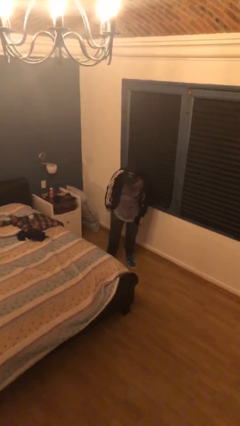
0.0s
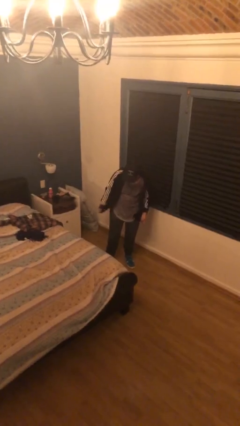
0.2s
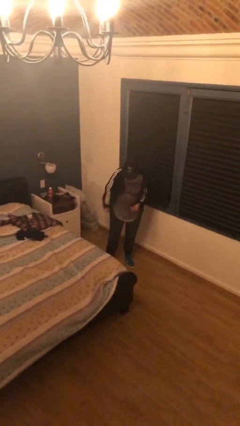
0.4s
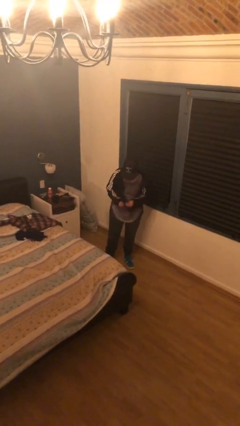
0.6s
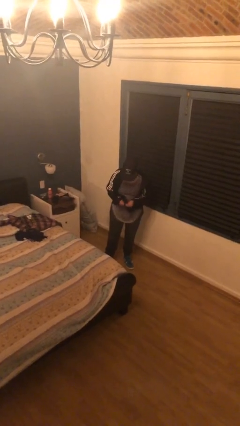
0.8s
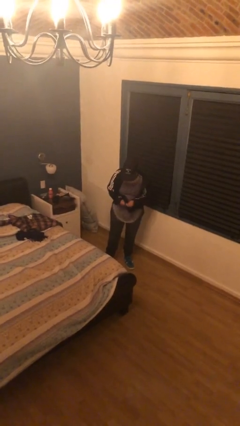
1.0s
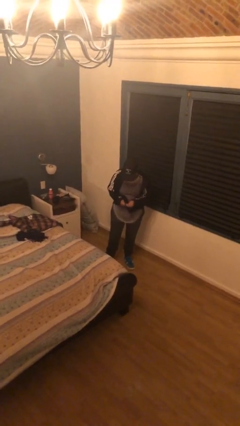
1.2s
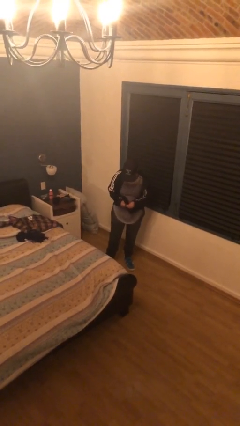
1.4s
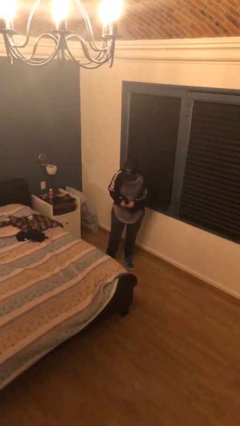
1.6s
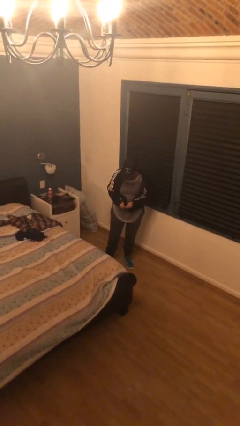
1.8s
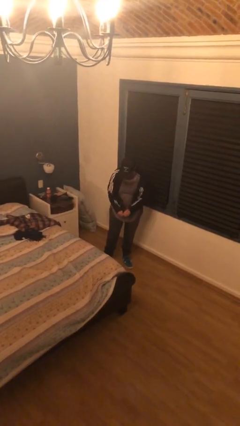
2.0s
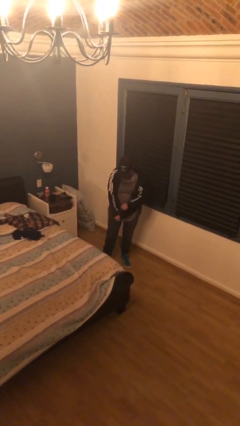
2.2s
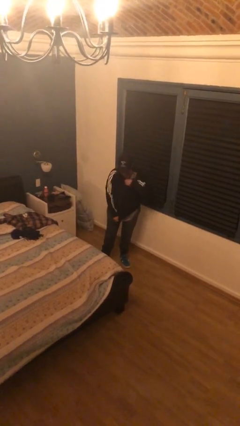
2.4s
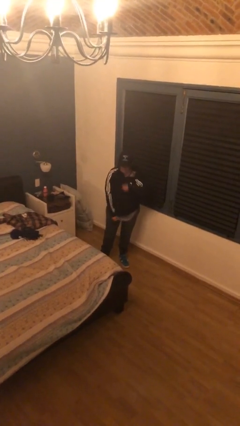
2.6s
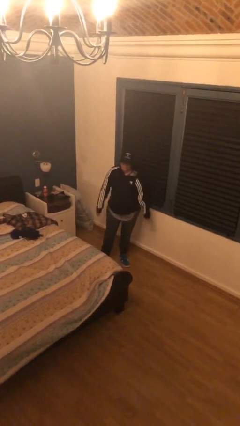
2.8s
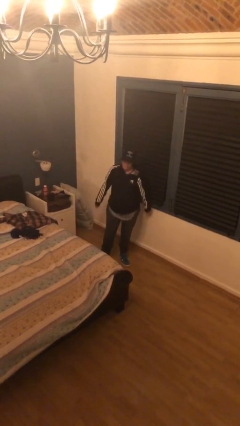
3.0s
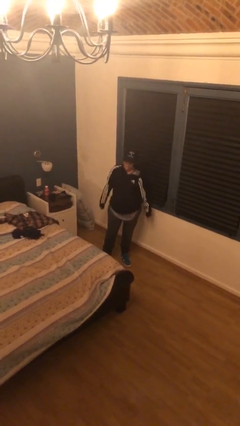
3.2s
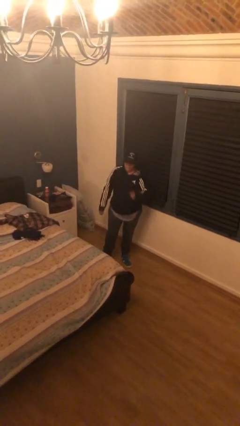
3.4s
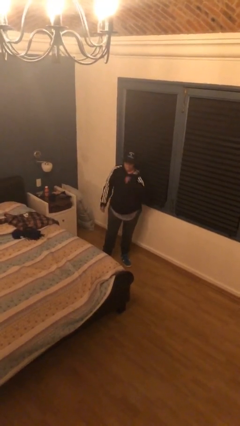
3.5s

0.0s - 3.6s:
person zips up jacket

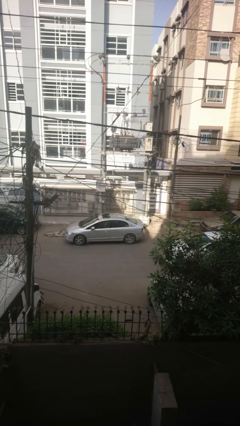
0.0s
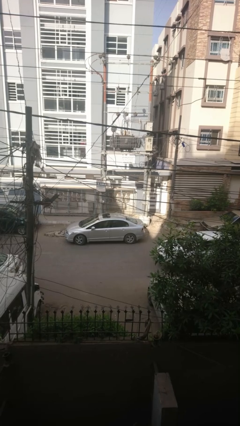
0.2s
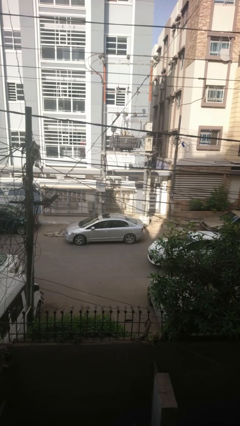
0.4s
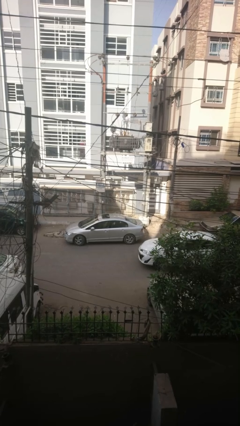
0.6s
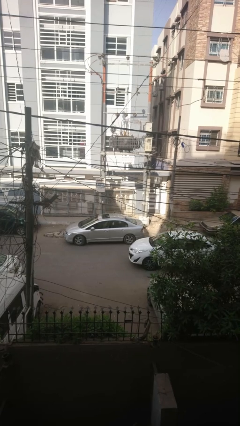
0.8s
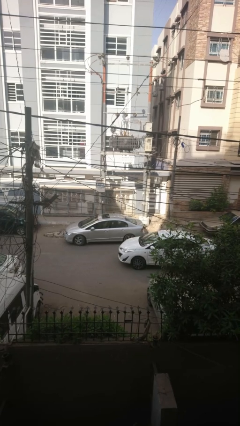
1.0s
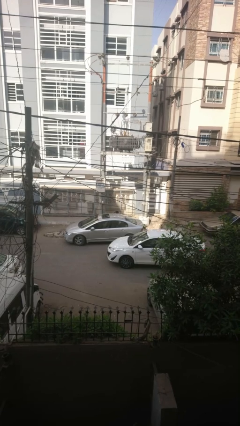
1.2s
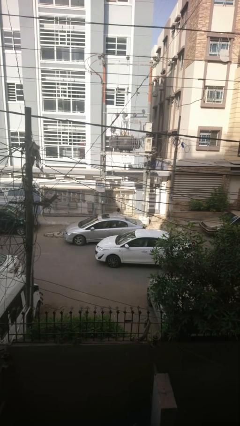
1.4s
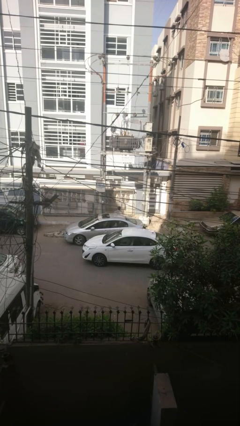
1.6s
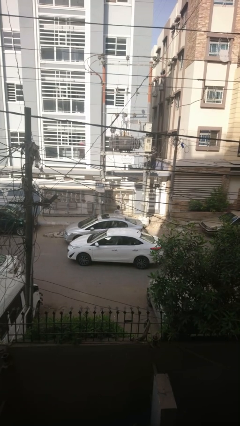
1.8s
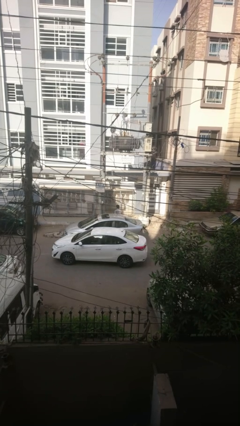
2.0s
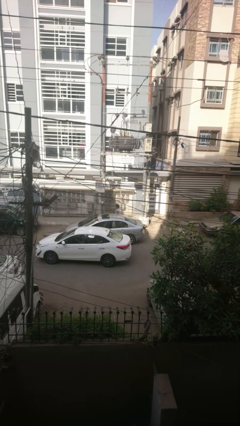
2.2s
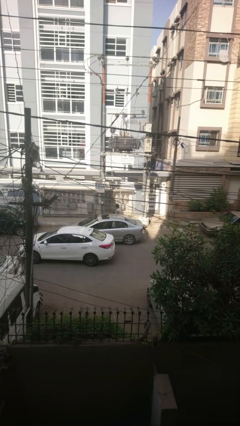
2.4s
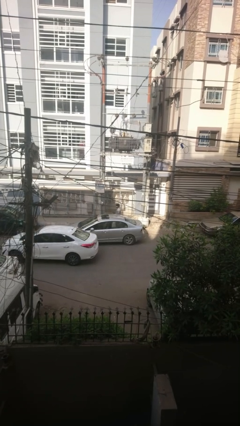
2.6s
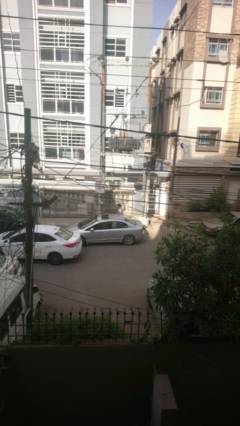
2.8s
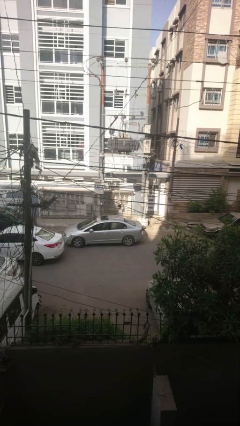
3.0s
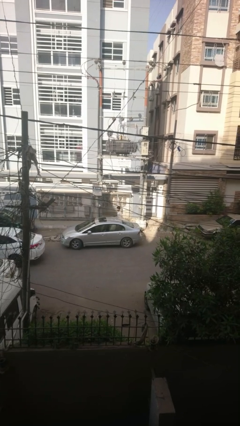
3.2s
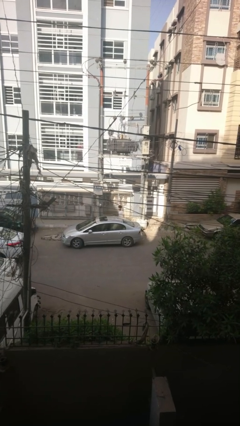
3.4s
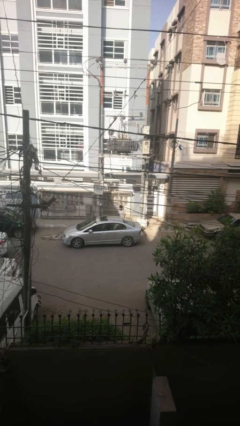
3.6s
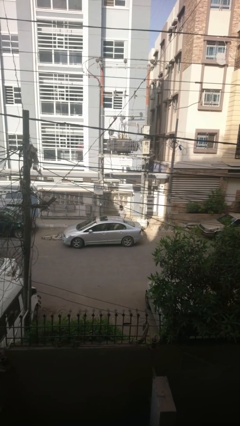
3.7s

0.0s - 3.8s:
person exits car

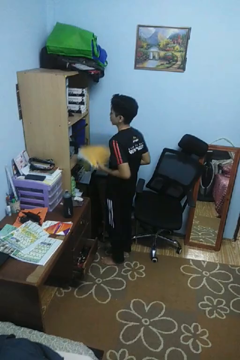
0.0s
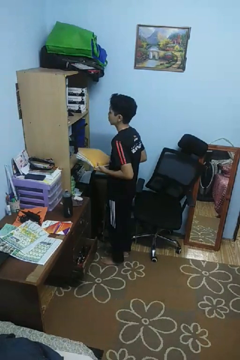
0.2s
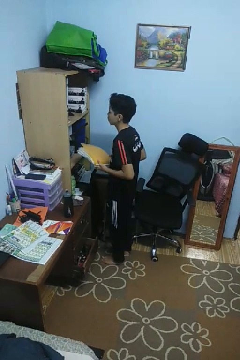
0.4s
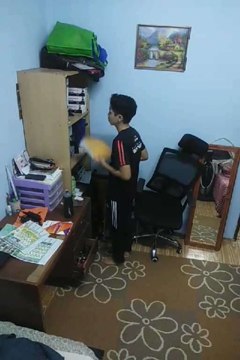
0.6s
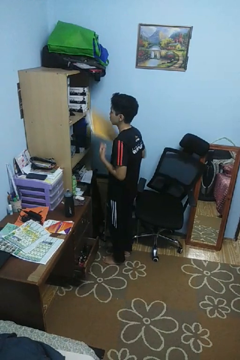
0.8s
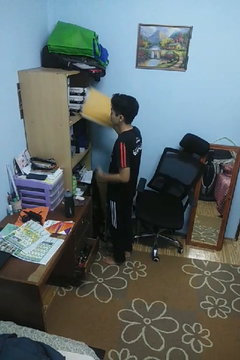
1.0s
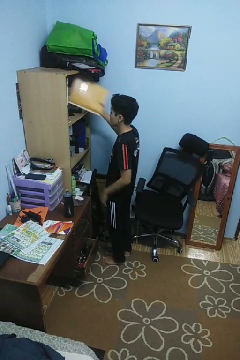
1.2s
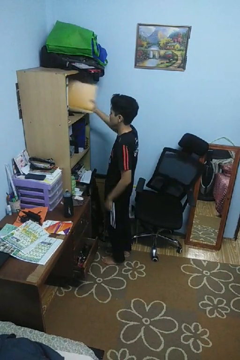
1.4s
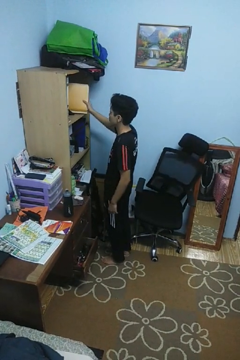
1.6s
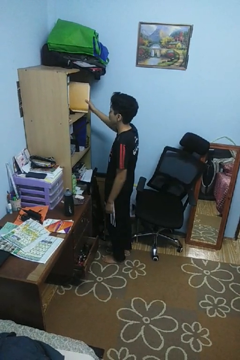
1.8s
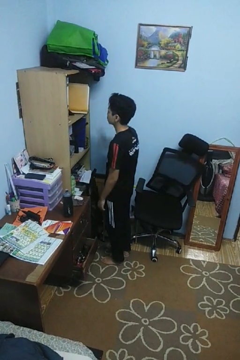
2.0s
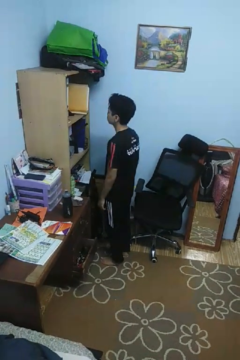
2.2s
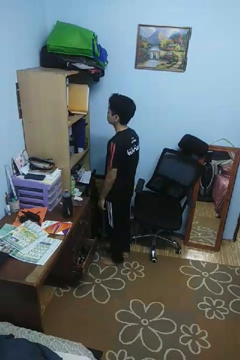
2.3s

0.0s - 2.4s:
person puts down object into cabinet

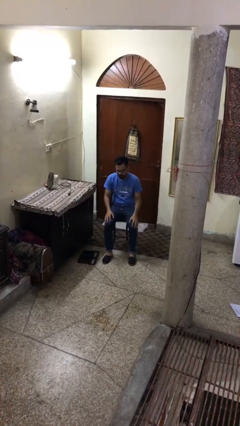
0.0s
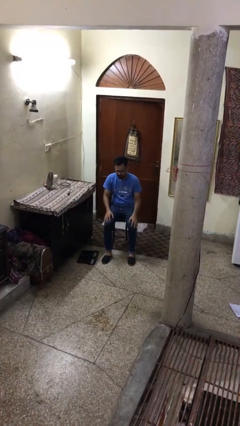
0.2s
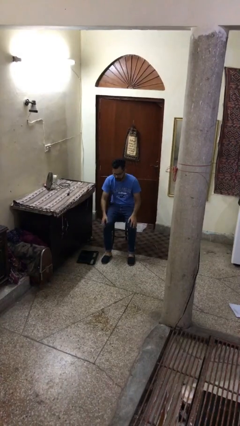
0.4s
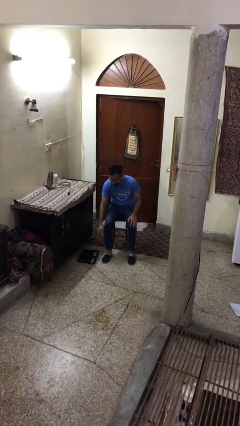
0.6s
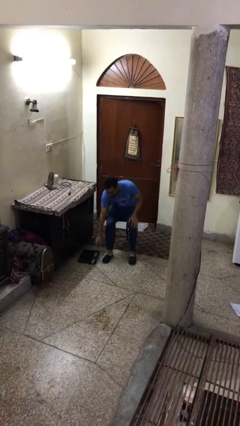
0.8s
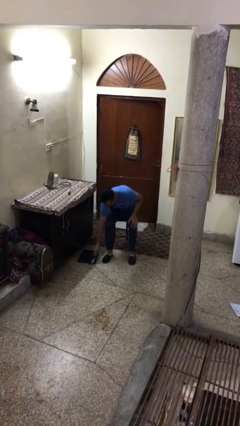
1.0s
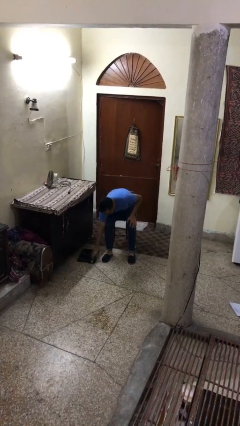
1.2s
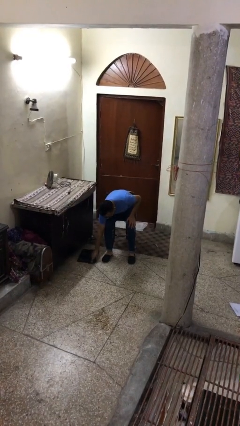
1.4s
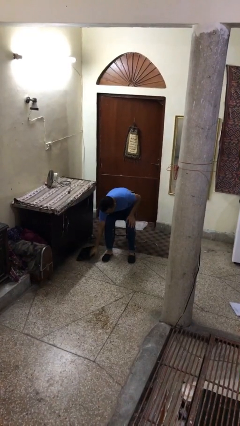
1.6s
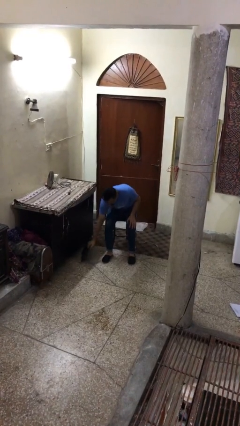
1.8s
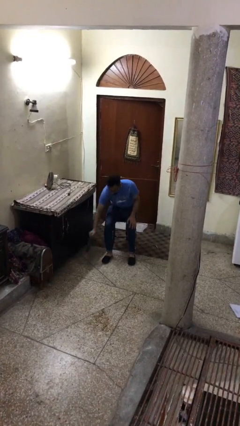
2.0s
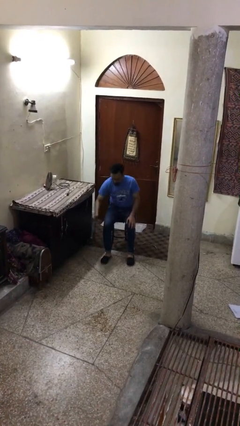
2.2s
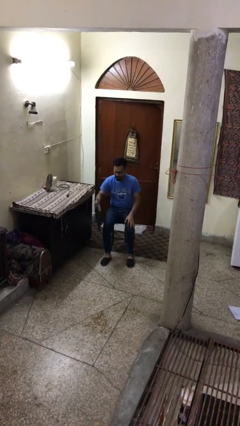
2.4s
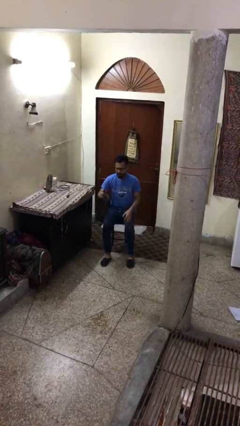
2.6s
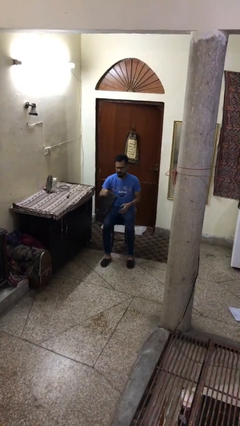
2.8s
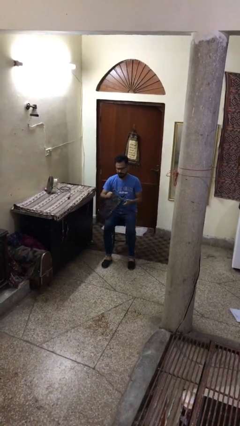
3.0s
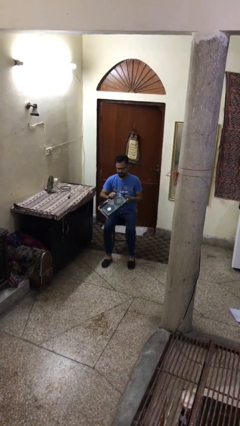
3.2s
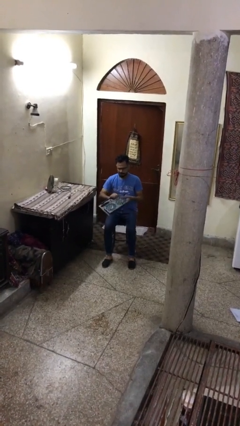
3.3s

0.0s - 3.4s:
person picks up object from floor

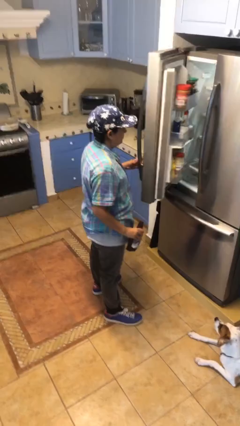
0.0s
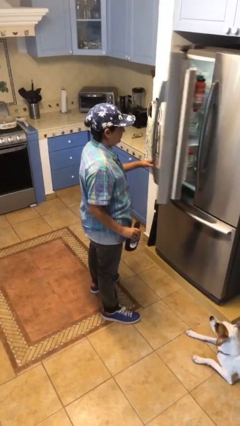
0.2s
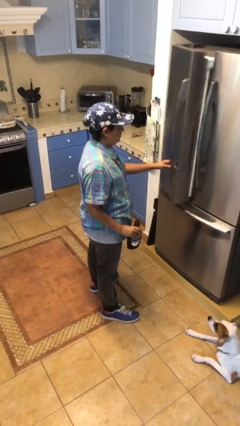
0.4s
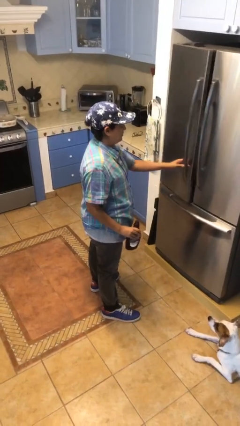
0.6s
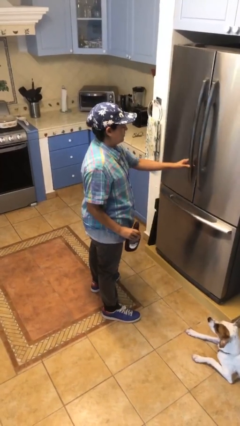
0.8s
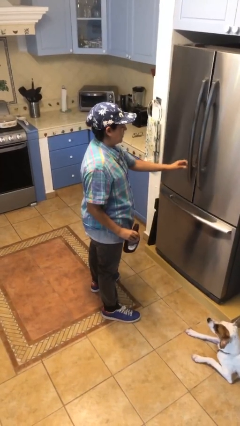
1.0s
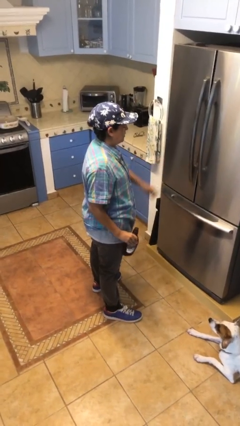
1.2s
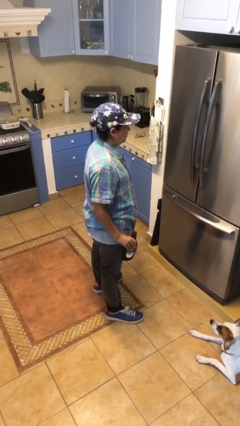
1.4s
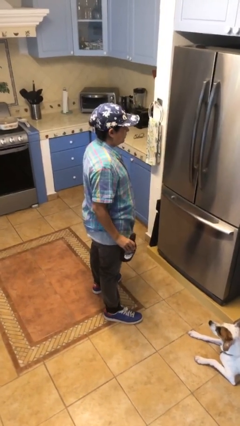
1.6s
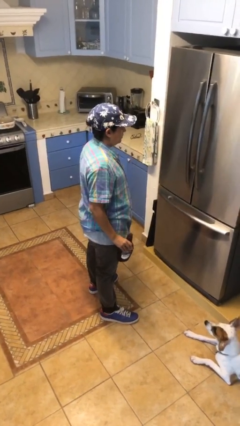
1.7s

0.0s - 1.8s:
person closes refrigerator

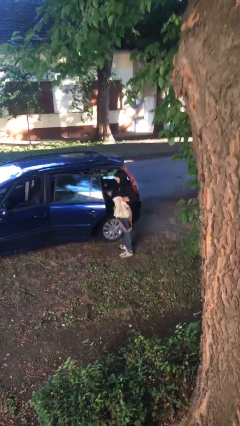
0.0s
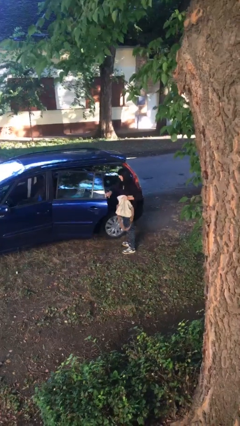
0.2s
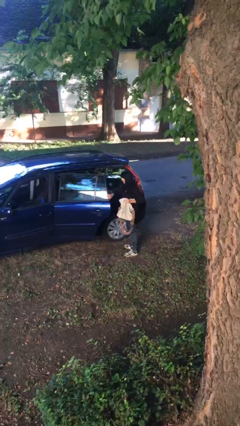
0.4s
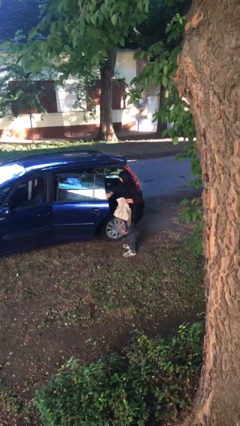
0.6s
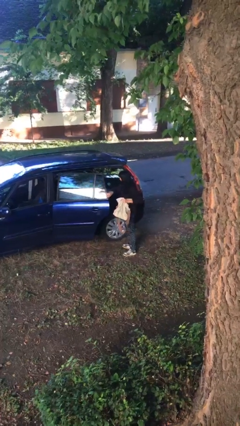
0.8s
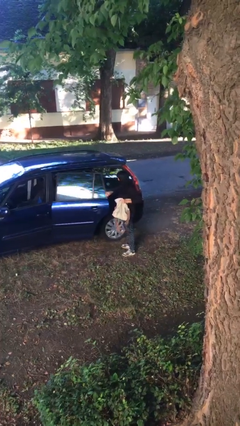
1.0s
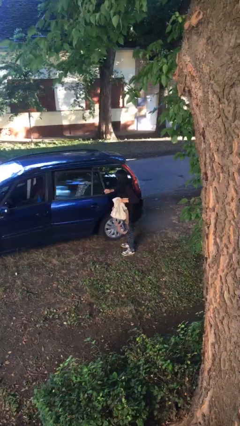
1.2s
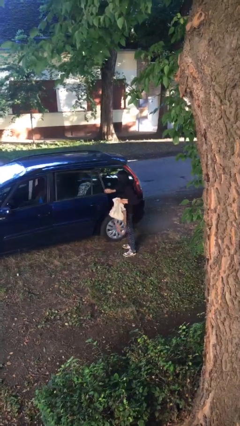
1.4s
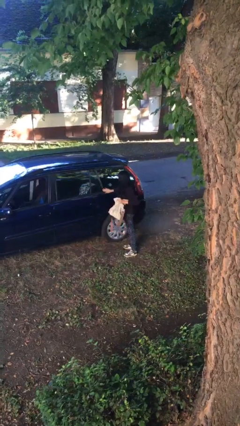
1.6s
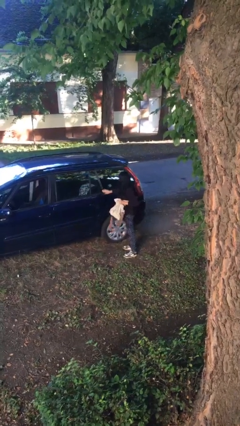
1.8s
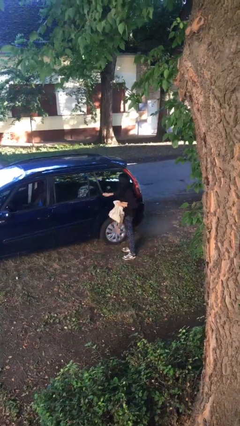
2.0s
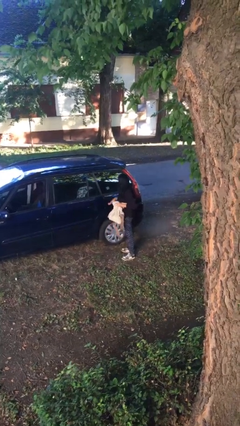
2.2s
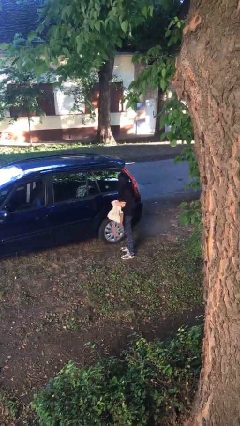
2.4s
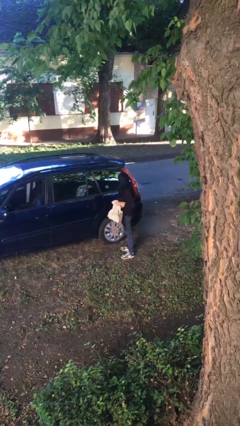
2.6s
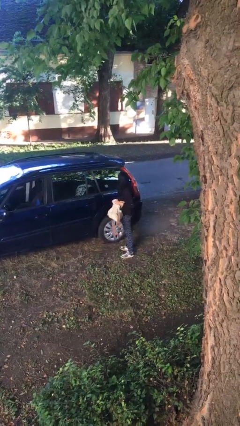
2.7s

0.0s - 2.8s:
person closes car door
